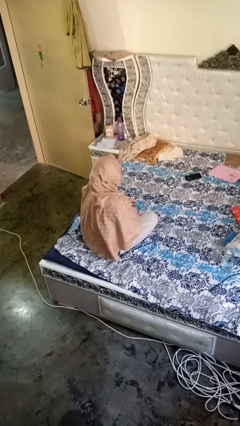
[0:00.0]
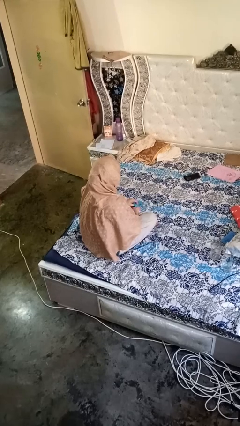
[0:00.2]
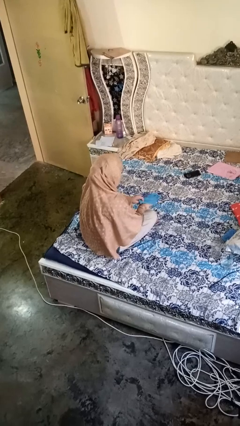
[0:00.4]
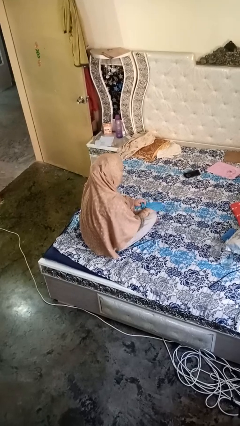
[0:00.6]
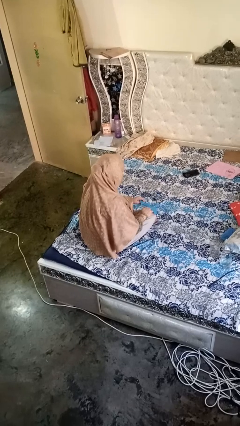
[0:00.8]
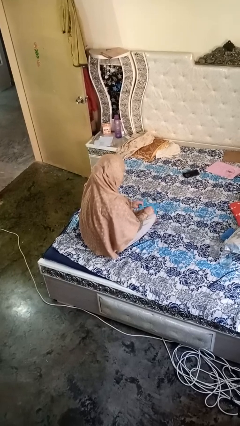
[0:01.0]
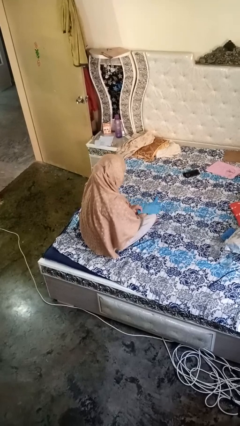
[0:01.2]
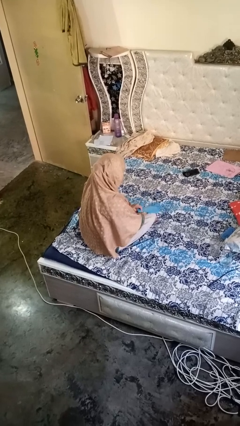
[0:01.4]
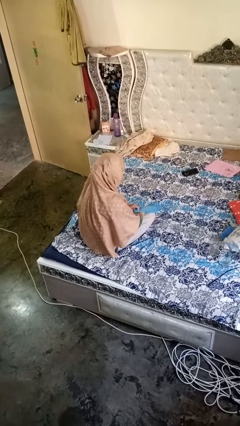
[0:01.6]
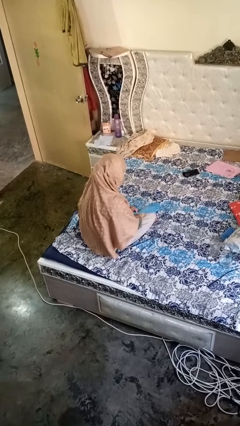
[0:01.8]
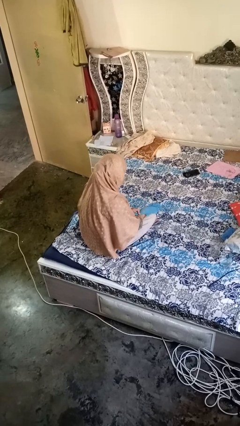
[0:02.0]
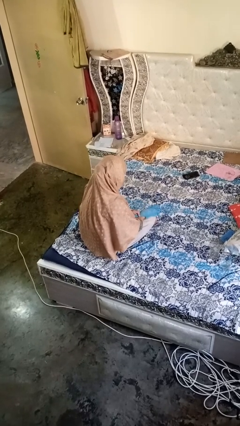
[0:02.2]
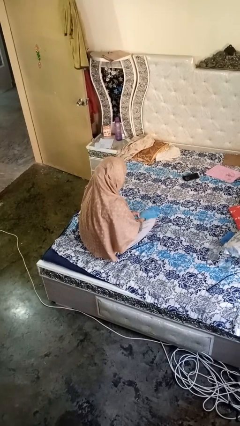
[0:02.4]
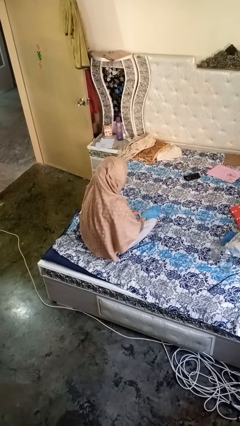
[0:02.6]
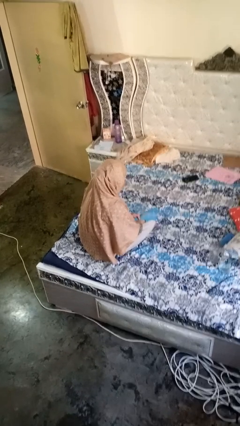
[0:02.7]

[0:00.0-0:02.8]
person puts on gloves

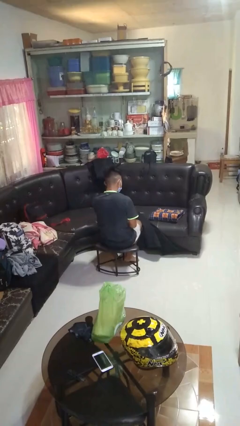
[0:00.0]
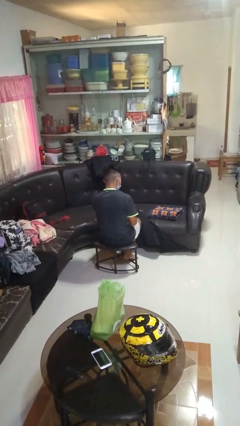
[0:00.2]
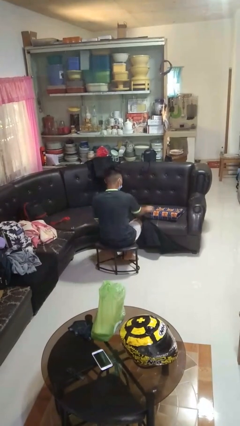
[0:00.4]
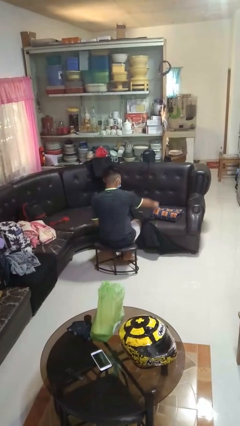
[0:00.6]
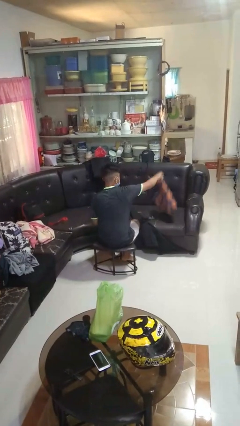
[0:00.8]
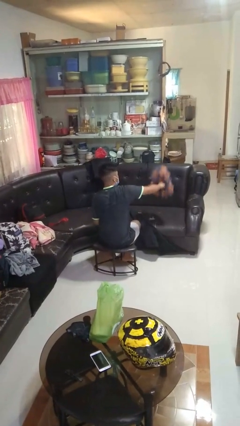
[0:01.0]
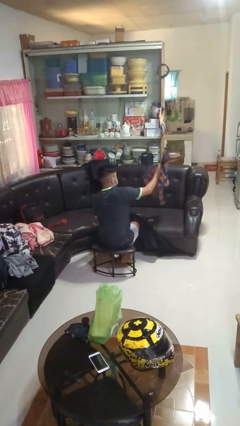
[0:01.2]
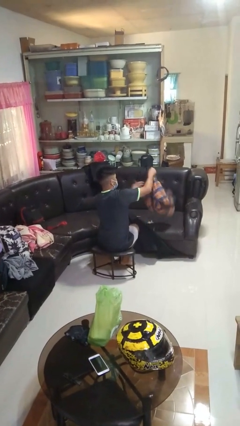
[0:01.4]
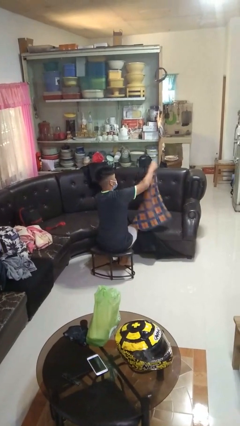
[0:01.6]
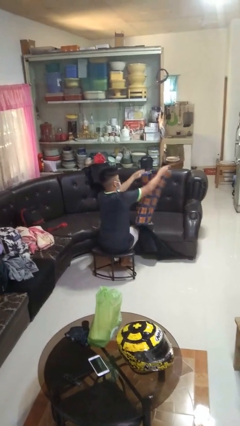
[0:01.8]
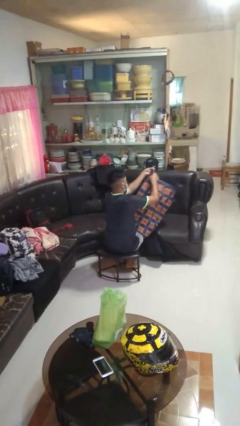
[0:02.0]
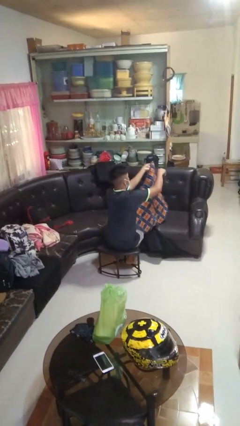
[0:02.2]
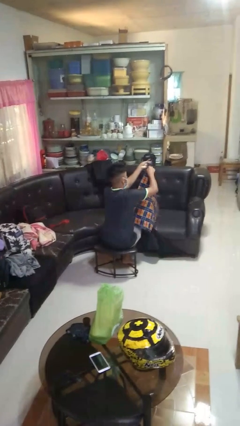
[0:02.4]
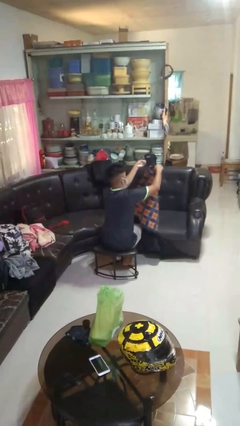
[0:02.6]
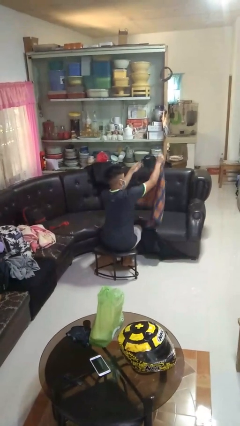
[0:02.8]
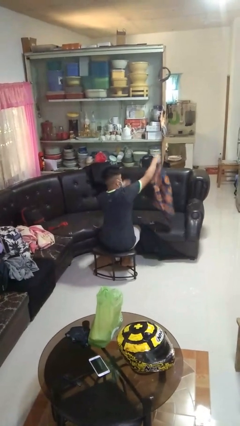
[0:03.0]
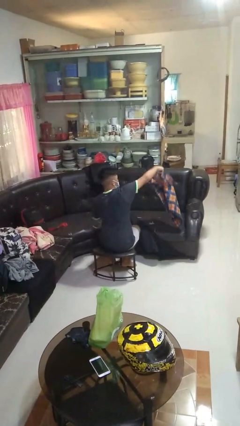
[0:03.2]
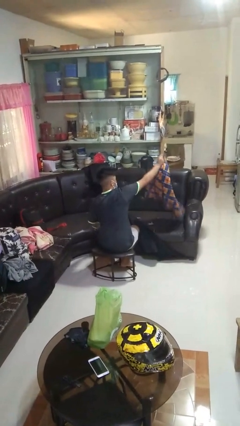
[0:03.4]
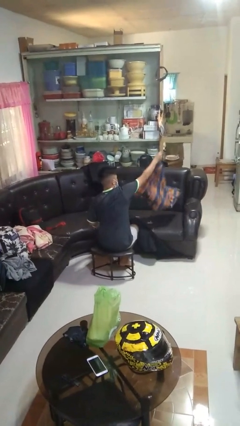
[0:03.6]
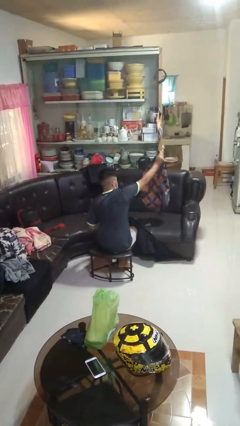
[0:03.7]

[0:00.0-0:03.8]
person unfolds blanket

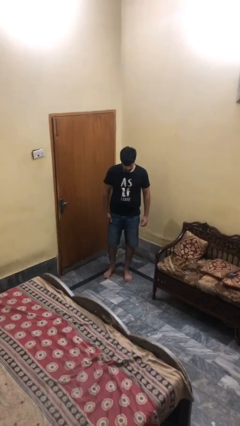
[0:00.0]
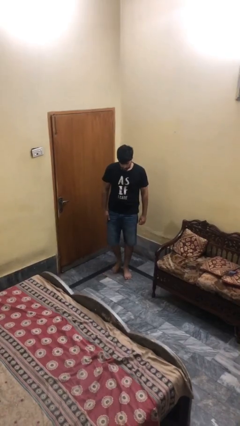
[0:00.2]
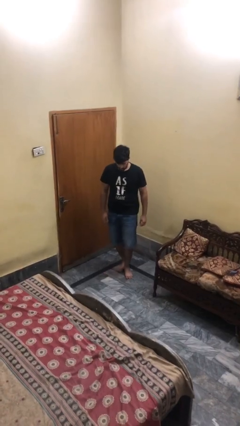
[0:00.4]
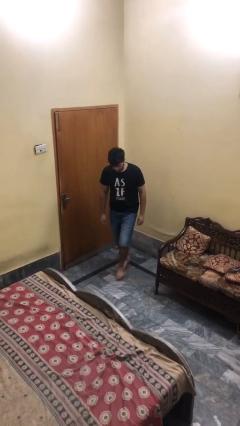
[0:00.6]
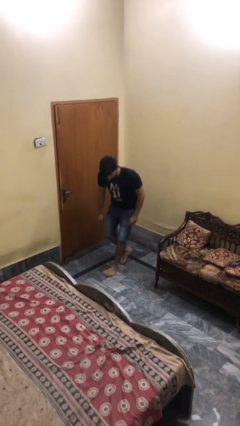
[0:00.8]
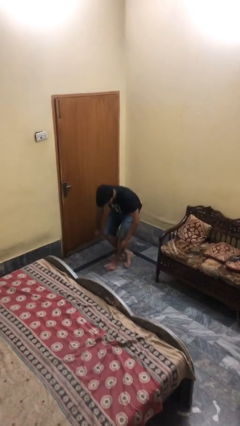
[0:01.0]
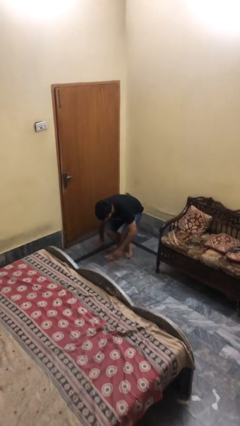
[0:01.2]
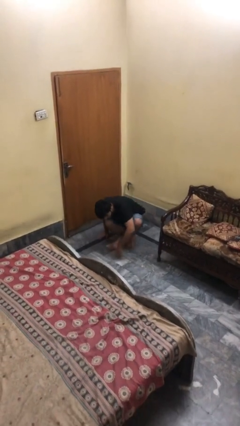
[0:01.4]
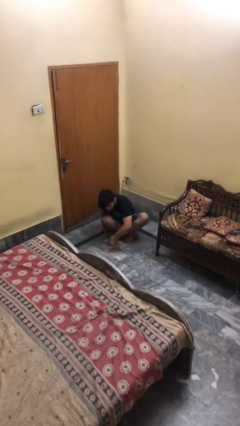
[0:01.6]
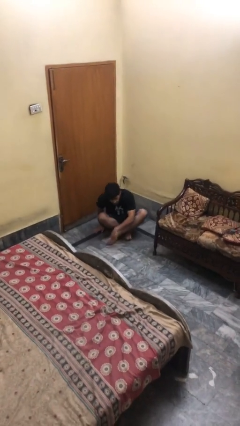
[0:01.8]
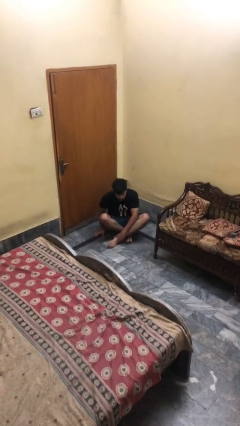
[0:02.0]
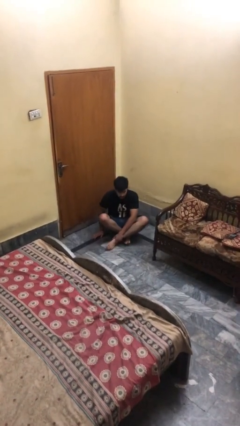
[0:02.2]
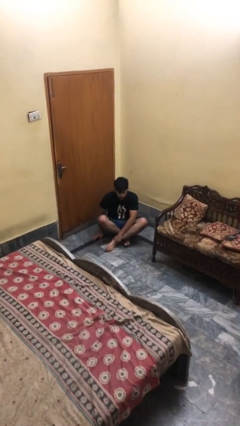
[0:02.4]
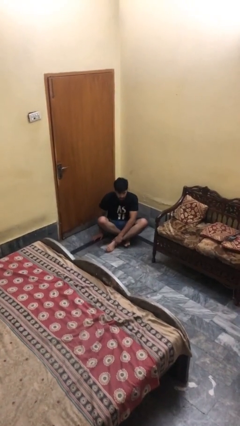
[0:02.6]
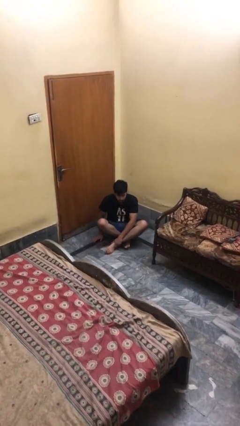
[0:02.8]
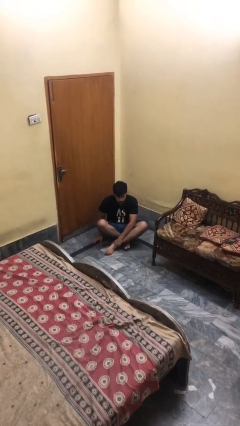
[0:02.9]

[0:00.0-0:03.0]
person sits crisscross

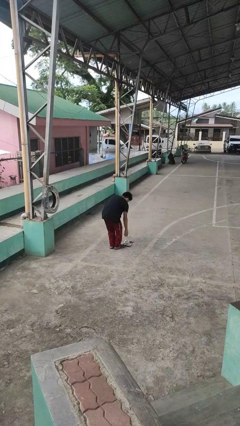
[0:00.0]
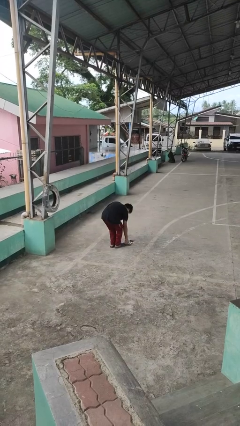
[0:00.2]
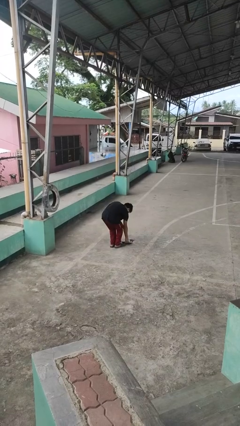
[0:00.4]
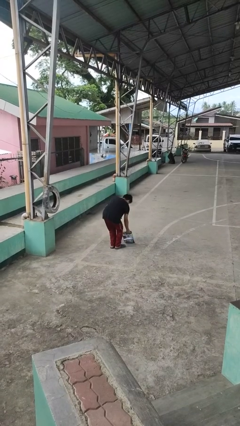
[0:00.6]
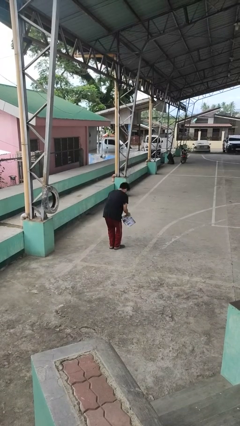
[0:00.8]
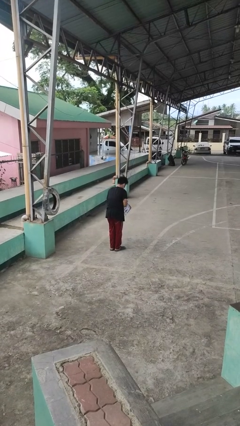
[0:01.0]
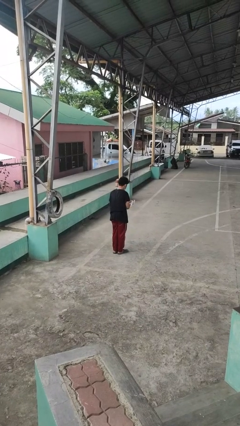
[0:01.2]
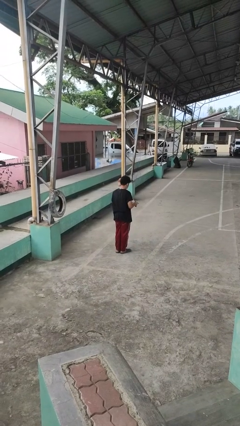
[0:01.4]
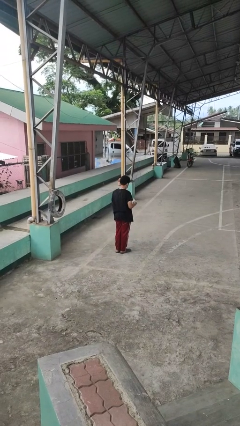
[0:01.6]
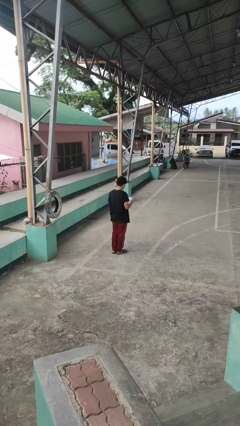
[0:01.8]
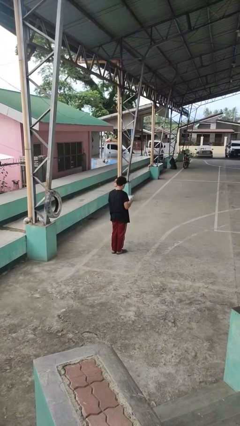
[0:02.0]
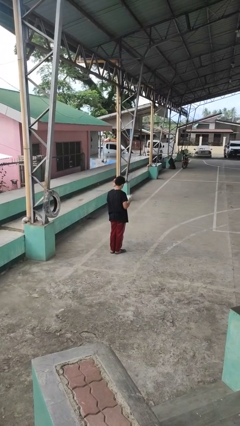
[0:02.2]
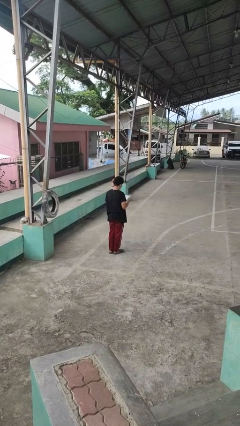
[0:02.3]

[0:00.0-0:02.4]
person picks up object from floor

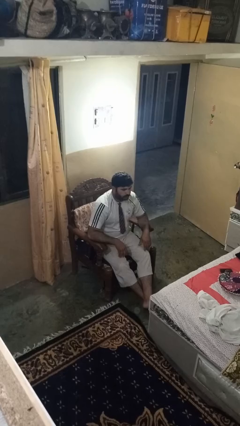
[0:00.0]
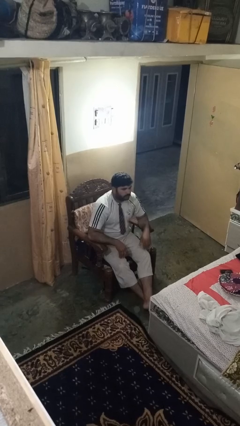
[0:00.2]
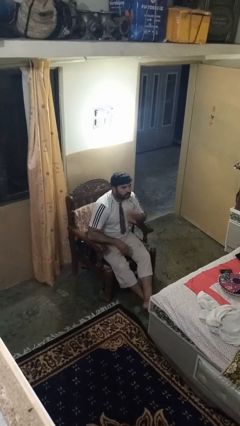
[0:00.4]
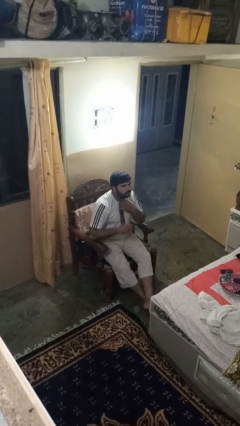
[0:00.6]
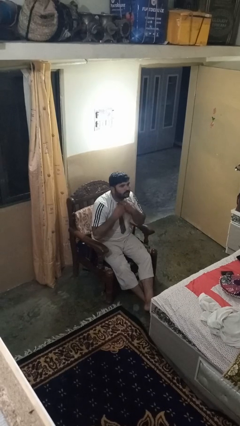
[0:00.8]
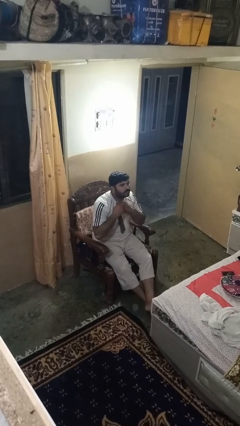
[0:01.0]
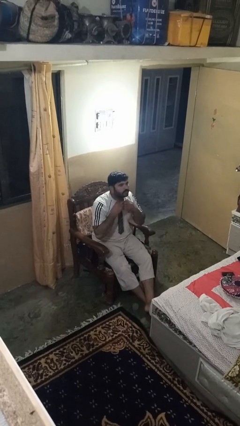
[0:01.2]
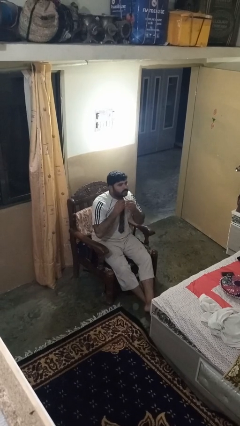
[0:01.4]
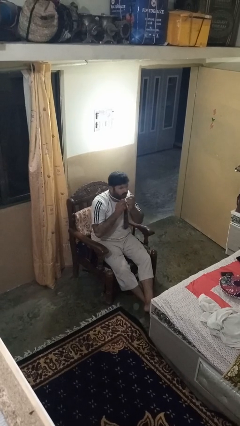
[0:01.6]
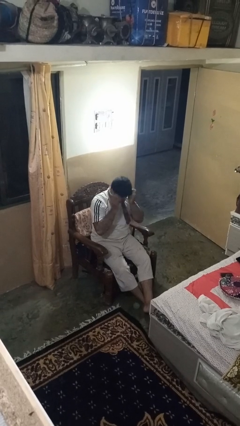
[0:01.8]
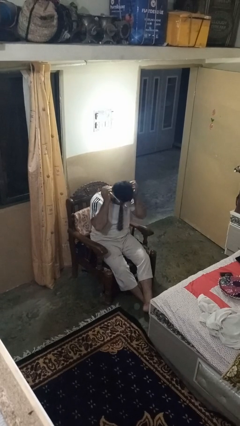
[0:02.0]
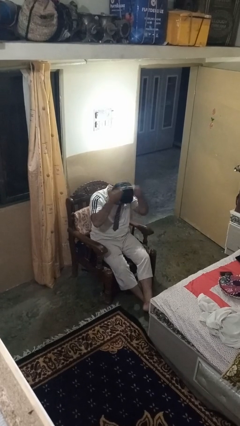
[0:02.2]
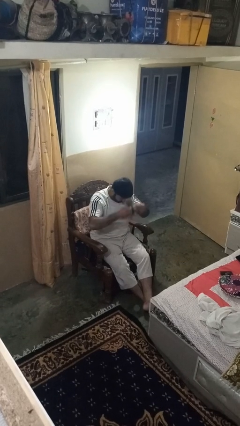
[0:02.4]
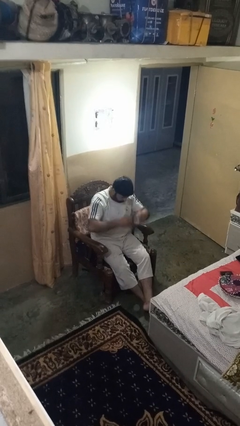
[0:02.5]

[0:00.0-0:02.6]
person takes off necktie

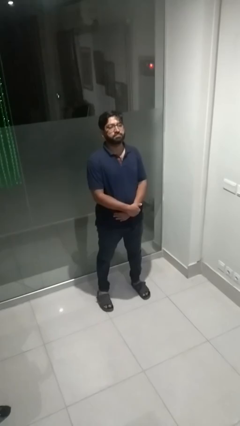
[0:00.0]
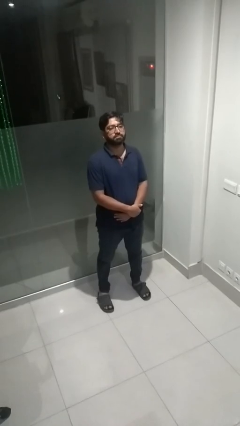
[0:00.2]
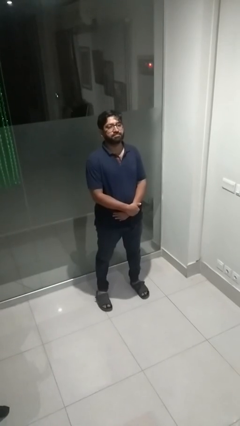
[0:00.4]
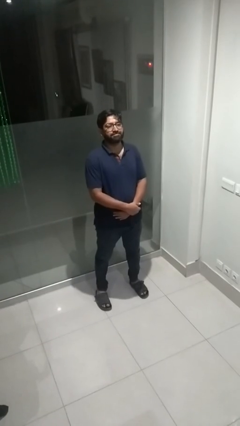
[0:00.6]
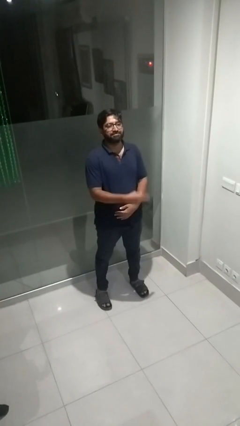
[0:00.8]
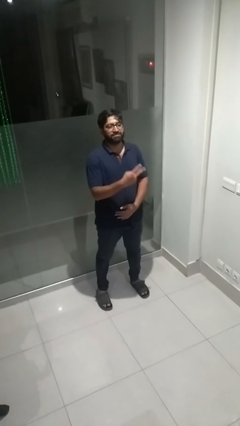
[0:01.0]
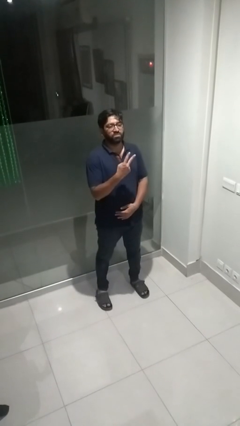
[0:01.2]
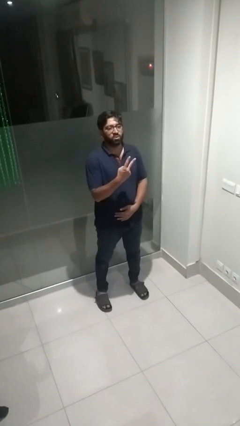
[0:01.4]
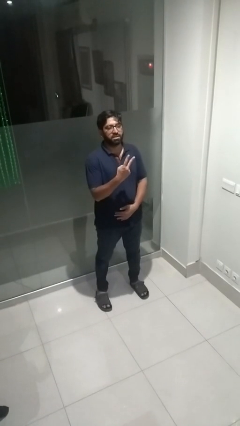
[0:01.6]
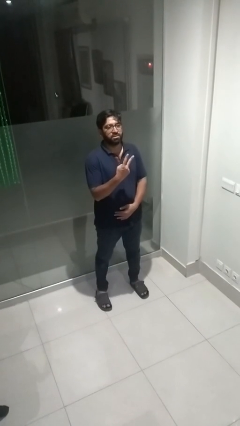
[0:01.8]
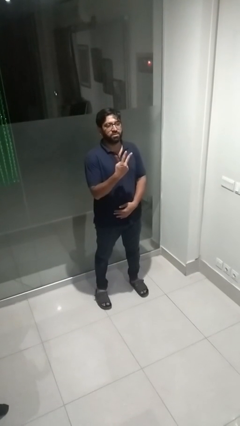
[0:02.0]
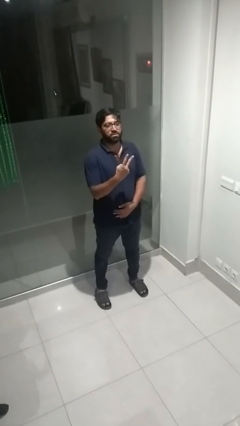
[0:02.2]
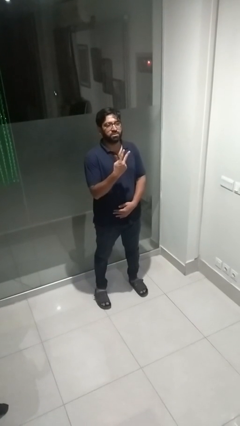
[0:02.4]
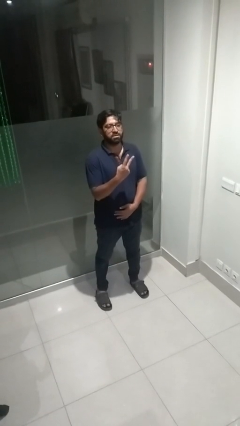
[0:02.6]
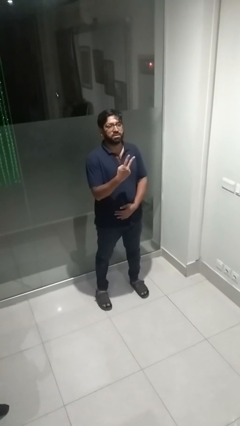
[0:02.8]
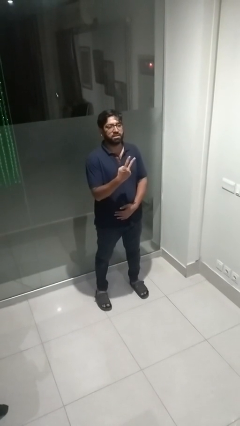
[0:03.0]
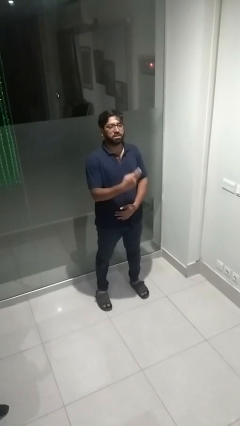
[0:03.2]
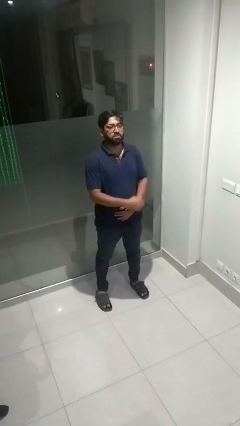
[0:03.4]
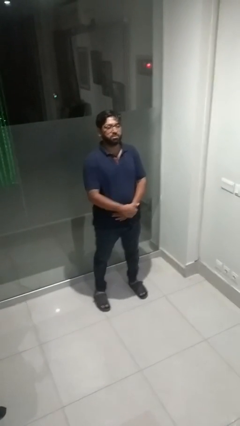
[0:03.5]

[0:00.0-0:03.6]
person gestures peace
